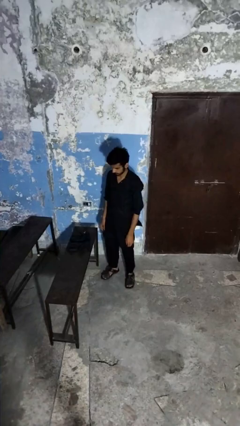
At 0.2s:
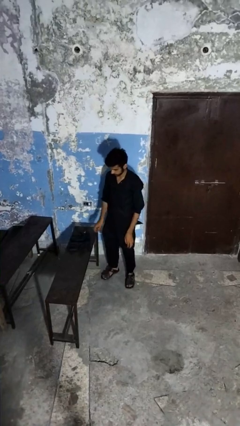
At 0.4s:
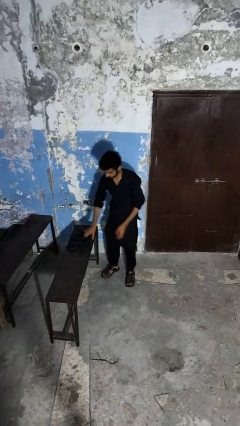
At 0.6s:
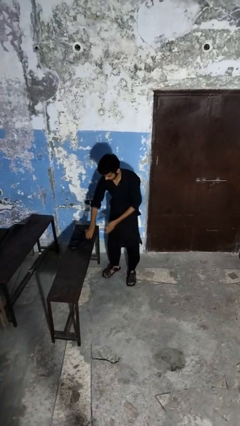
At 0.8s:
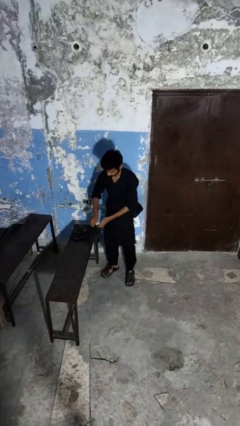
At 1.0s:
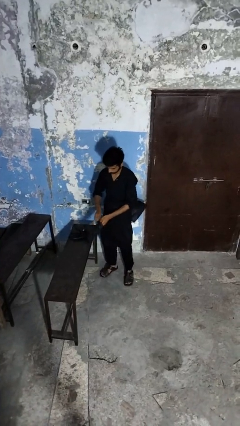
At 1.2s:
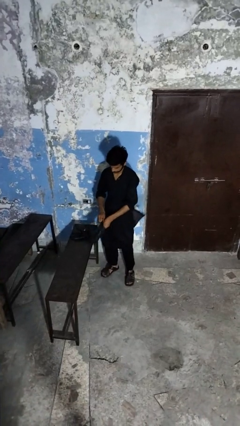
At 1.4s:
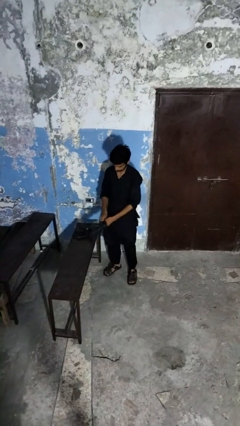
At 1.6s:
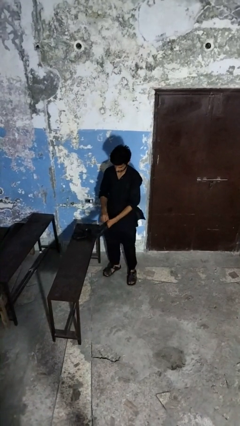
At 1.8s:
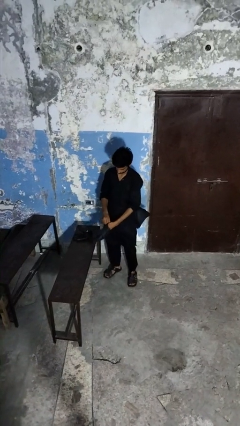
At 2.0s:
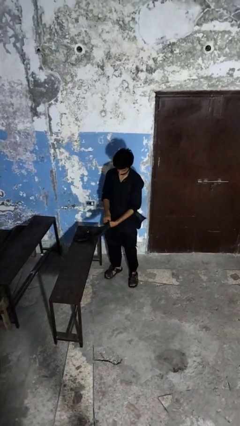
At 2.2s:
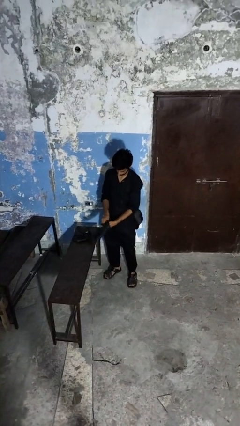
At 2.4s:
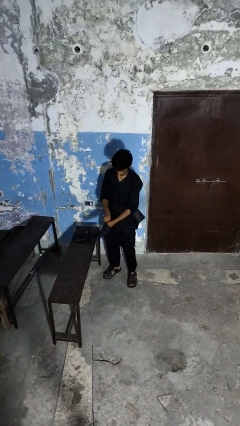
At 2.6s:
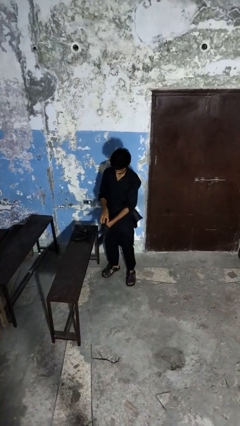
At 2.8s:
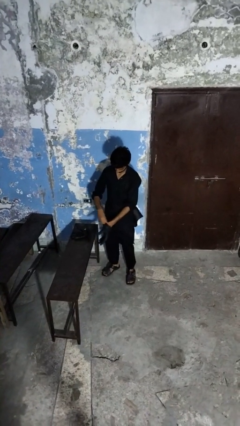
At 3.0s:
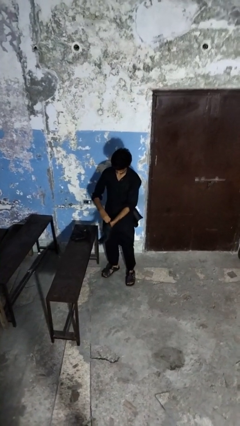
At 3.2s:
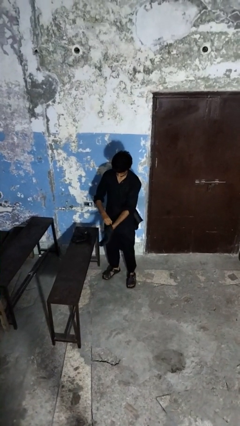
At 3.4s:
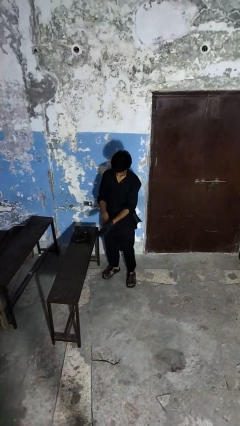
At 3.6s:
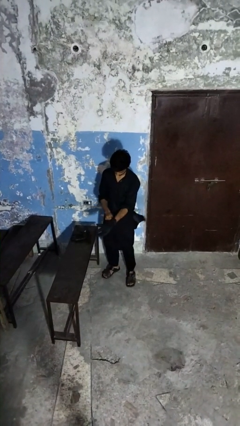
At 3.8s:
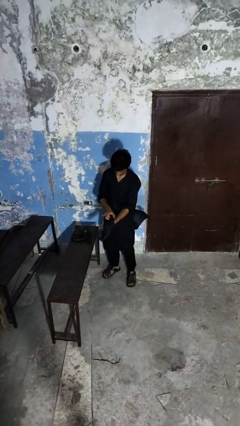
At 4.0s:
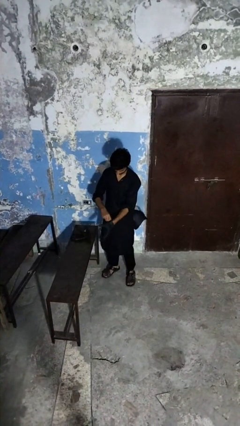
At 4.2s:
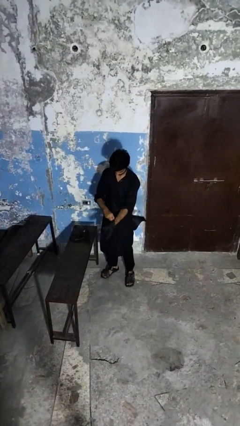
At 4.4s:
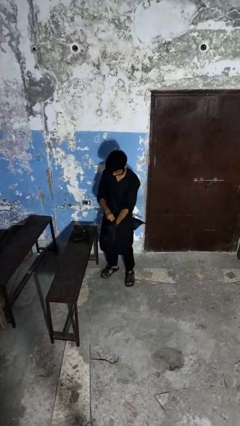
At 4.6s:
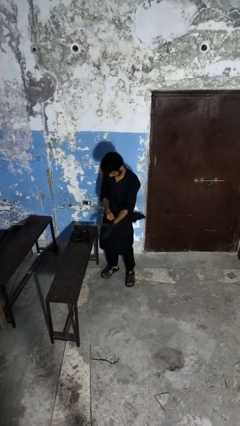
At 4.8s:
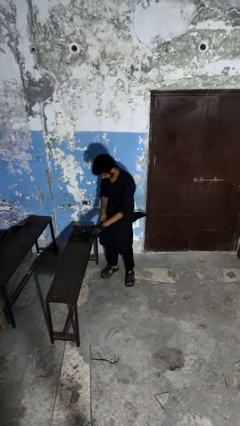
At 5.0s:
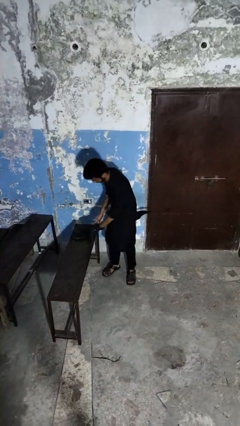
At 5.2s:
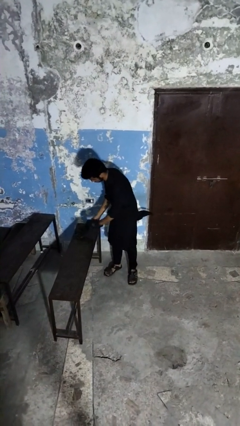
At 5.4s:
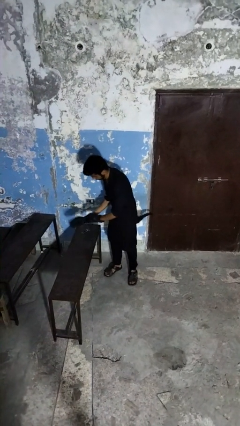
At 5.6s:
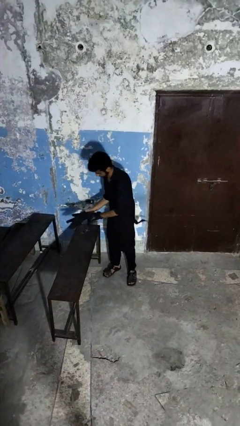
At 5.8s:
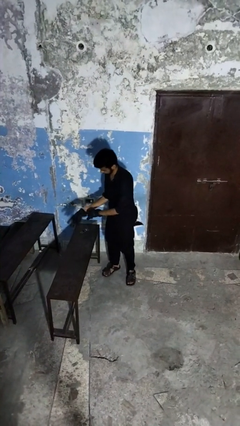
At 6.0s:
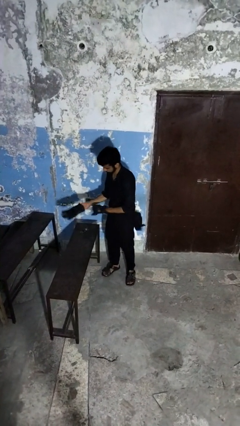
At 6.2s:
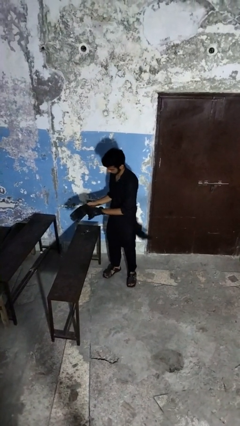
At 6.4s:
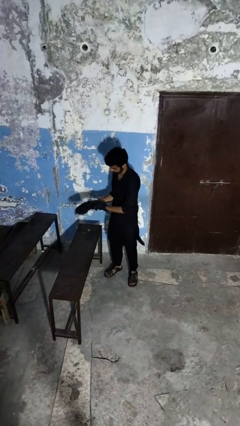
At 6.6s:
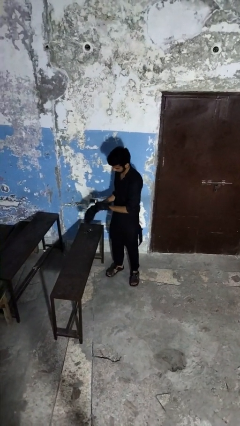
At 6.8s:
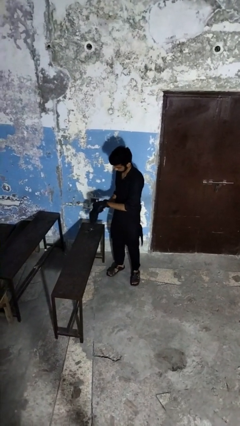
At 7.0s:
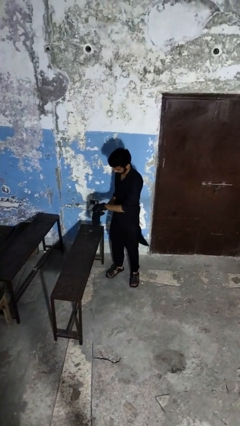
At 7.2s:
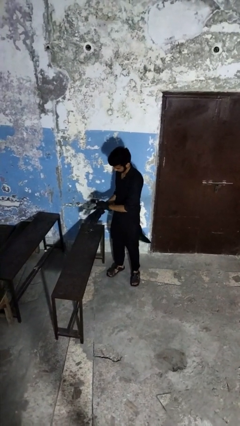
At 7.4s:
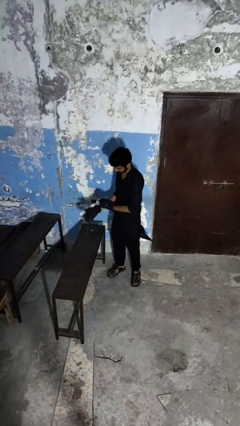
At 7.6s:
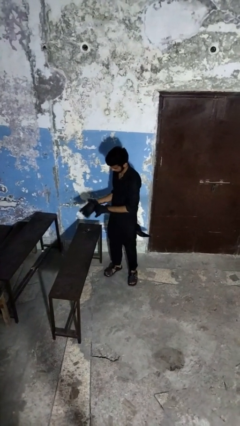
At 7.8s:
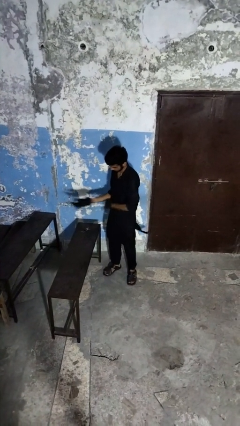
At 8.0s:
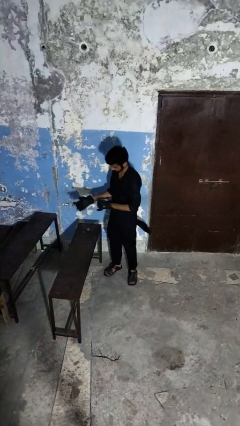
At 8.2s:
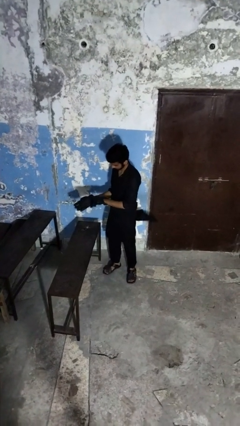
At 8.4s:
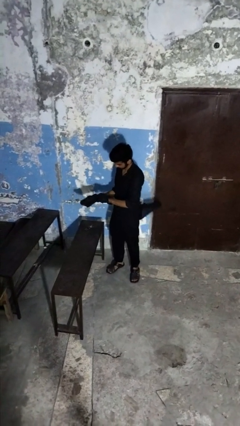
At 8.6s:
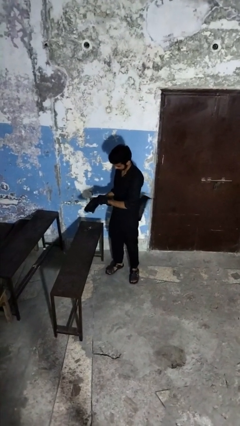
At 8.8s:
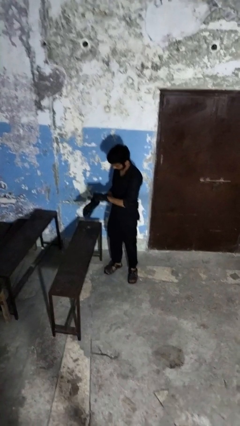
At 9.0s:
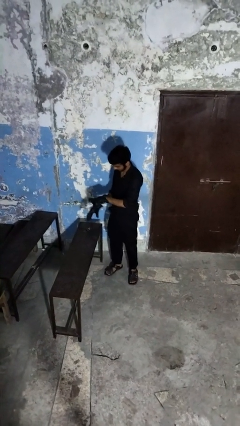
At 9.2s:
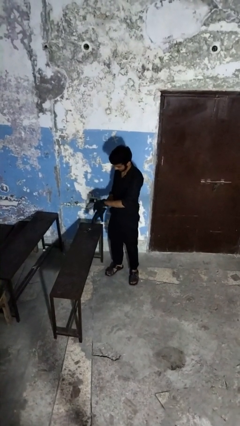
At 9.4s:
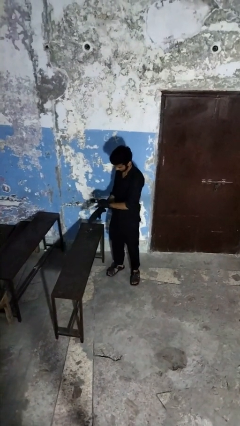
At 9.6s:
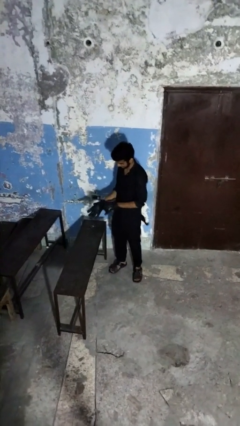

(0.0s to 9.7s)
person puts on gloves

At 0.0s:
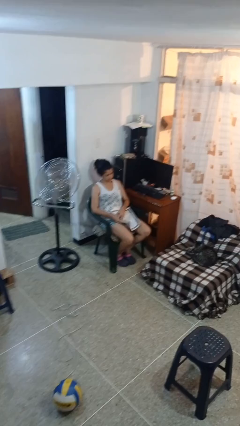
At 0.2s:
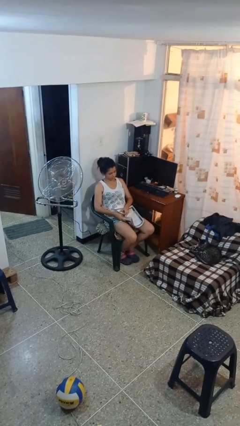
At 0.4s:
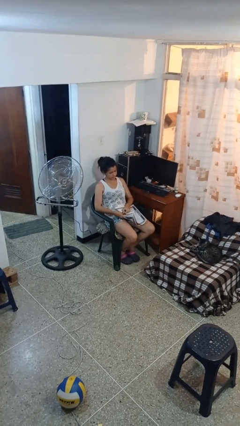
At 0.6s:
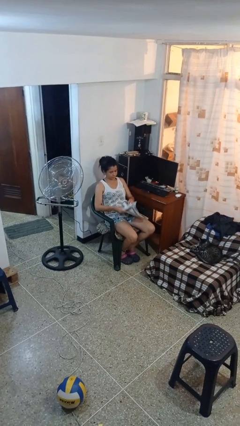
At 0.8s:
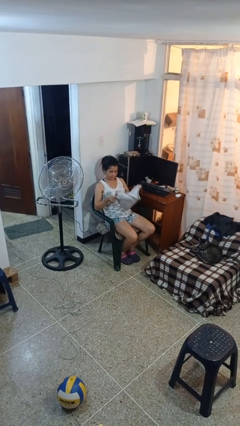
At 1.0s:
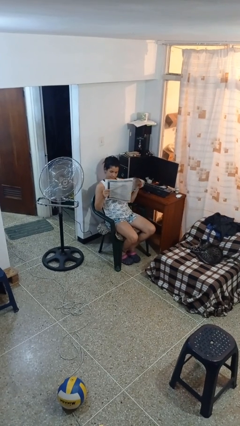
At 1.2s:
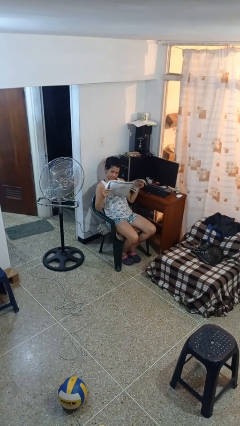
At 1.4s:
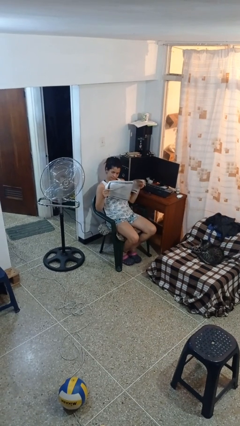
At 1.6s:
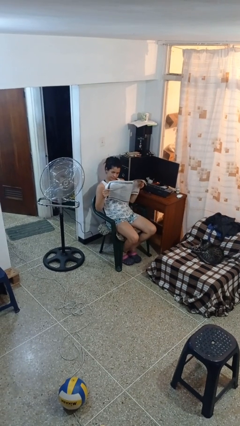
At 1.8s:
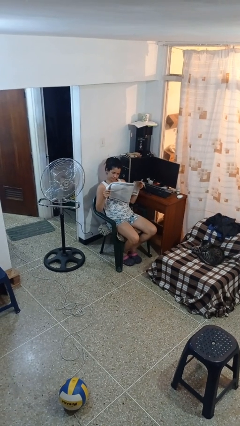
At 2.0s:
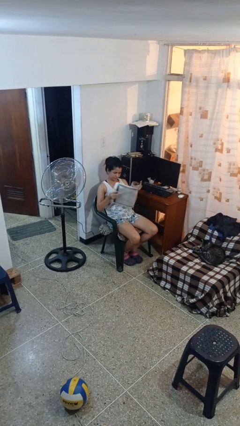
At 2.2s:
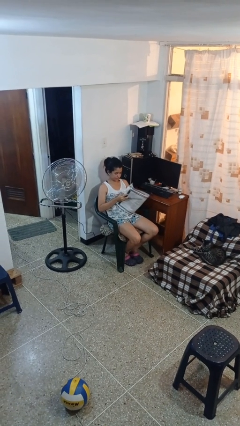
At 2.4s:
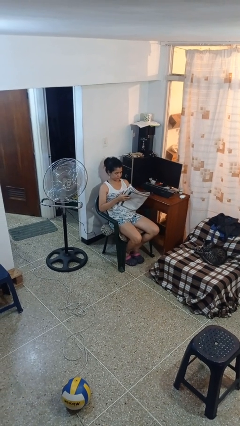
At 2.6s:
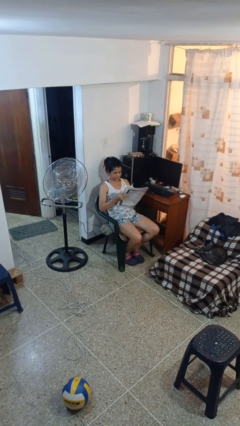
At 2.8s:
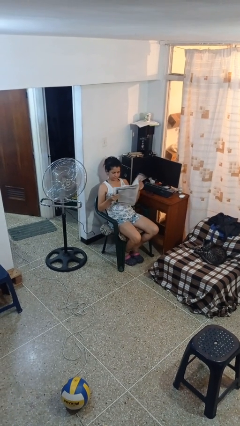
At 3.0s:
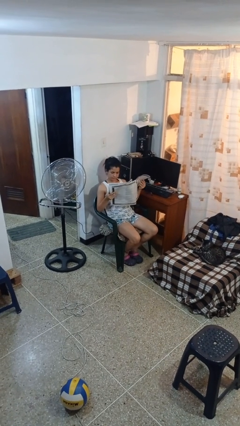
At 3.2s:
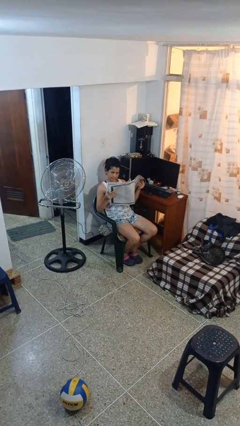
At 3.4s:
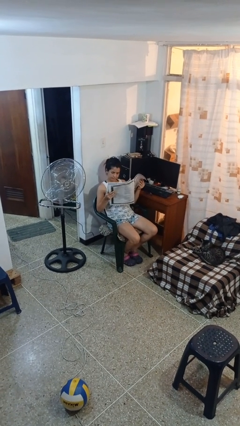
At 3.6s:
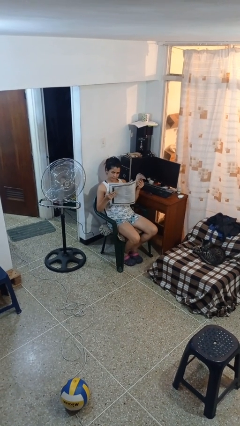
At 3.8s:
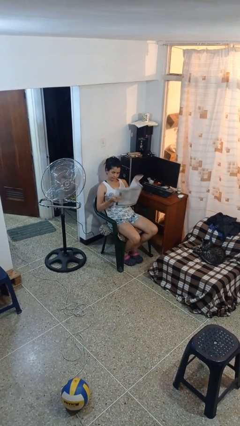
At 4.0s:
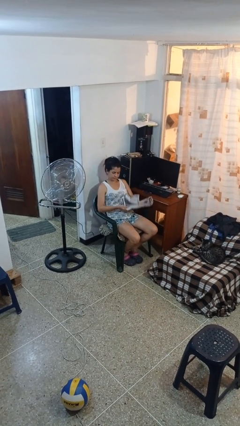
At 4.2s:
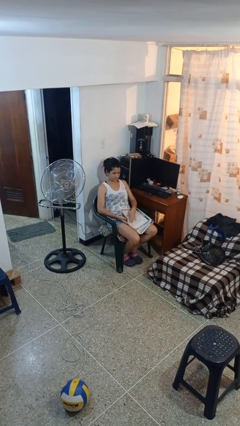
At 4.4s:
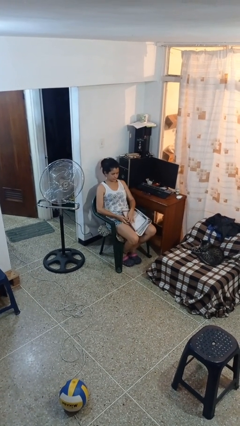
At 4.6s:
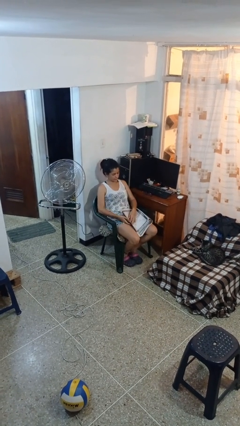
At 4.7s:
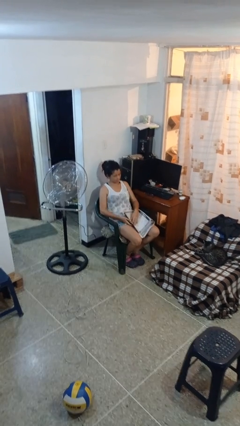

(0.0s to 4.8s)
person reads newspaper

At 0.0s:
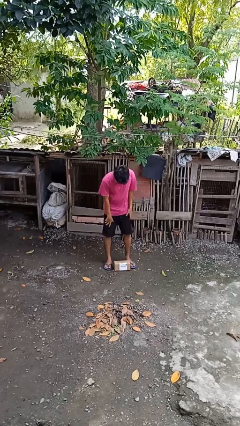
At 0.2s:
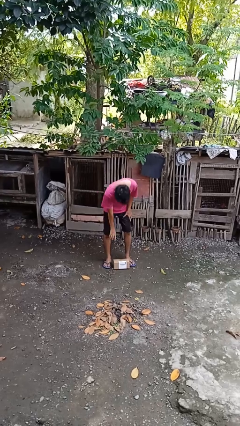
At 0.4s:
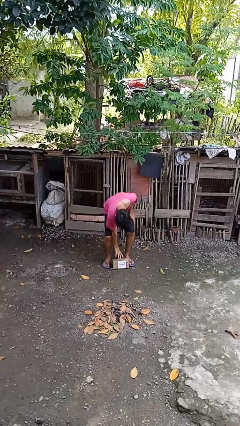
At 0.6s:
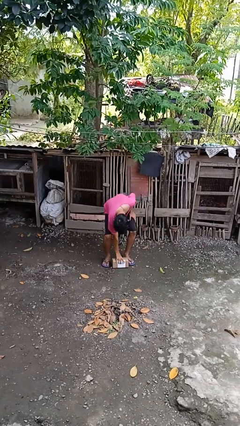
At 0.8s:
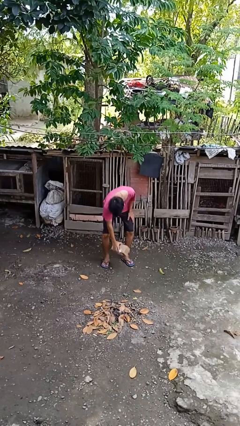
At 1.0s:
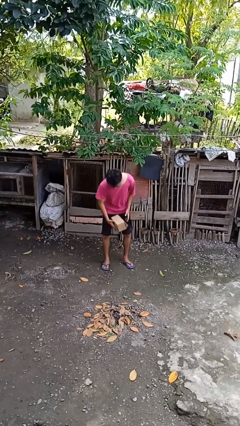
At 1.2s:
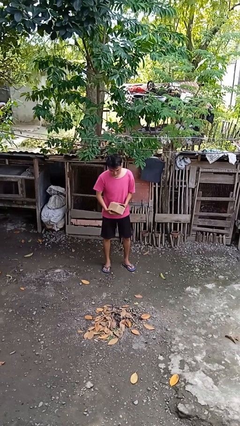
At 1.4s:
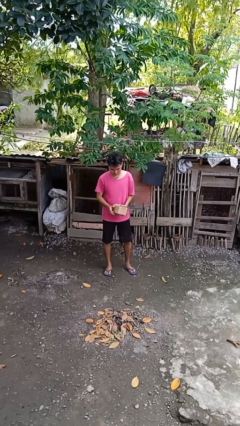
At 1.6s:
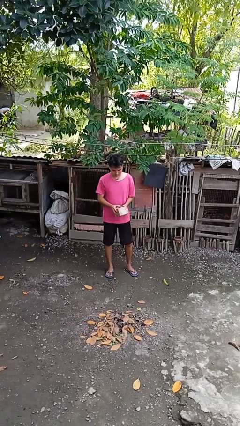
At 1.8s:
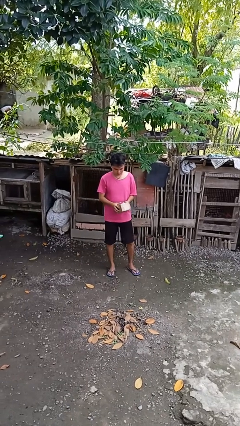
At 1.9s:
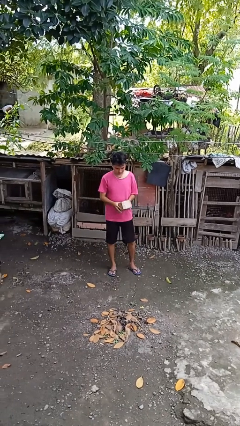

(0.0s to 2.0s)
person picks up object from floor

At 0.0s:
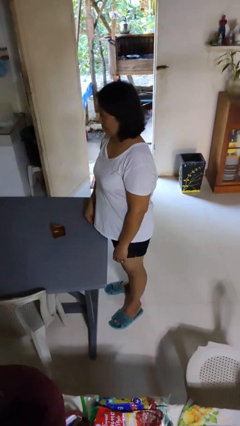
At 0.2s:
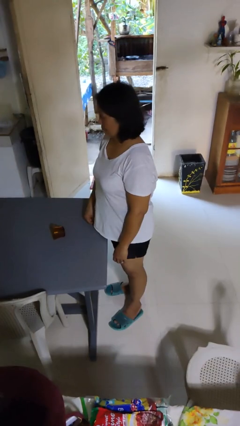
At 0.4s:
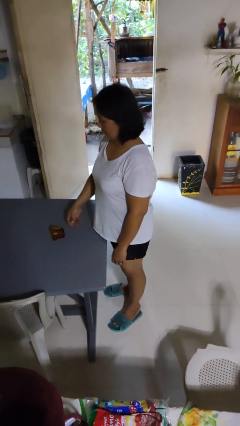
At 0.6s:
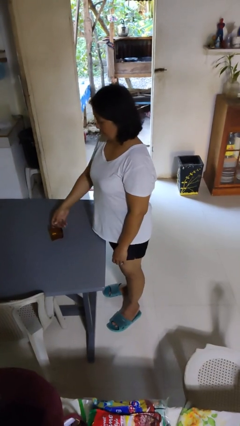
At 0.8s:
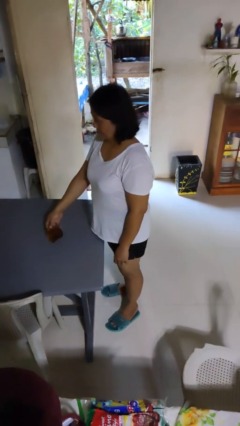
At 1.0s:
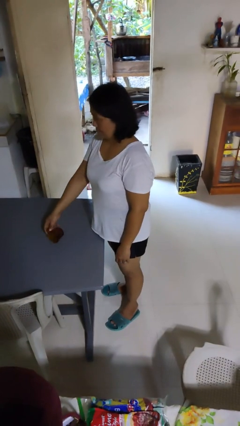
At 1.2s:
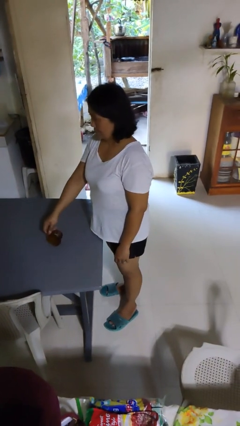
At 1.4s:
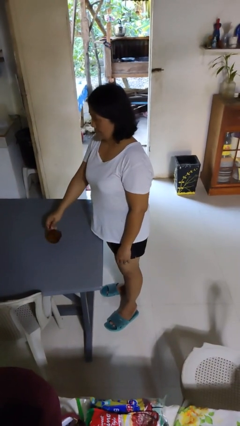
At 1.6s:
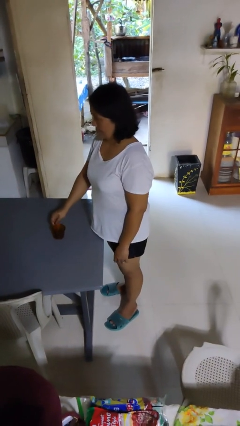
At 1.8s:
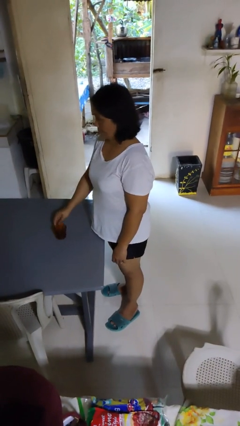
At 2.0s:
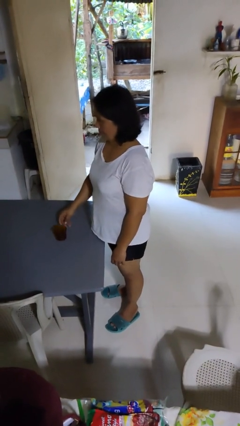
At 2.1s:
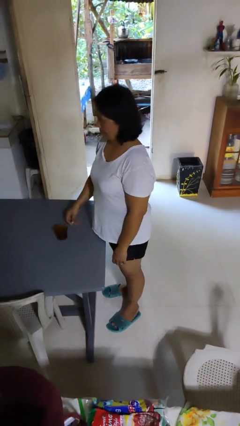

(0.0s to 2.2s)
person sets upright glass
